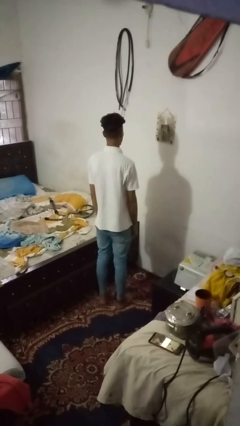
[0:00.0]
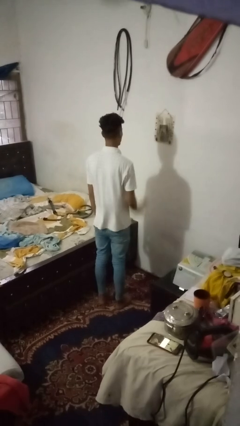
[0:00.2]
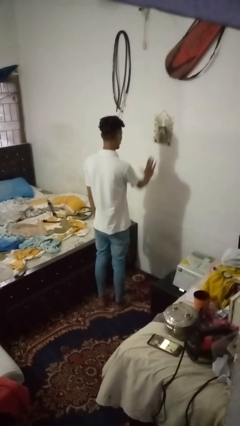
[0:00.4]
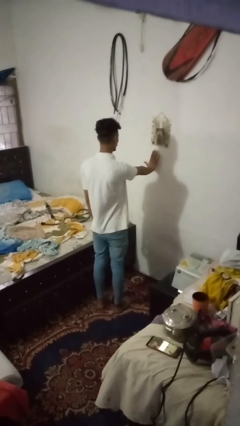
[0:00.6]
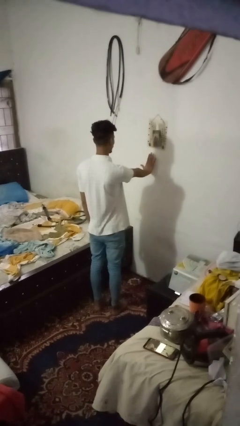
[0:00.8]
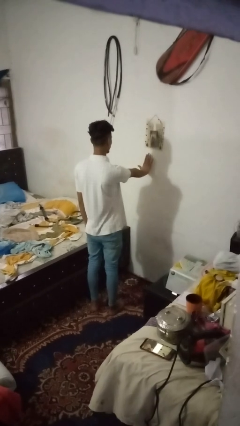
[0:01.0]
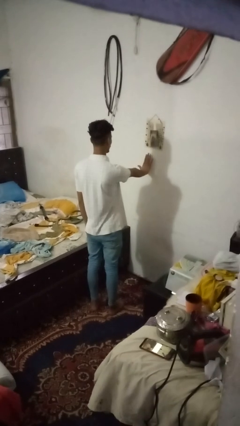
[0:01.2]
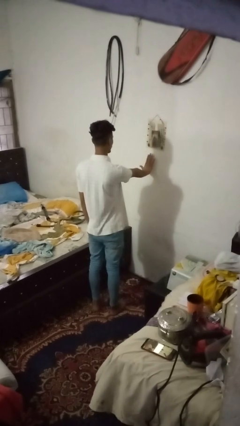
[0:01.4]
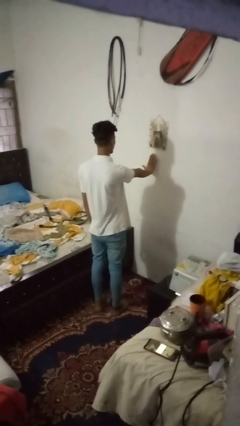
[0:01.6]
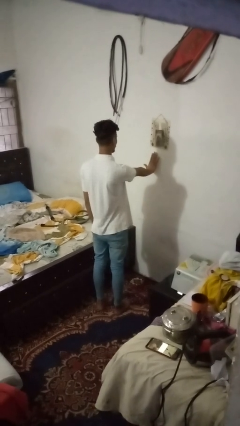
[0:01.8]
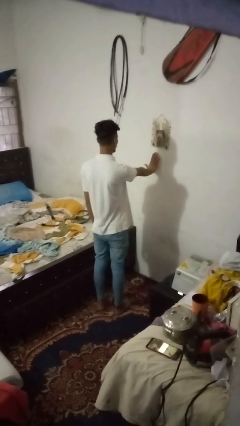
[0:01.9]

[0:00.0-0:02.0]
person gestures stop

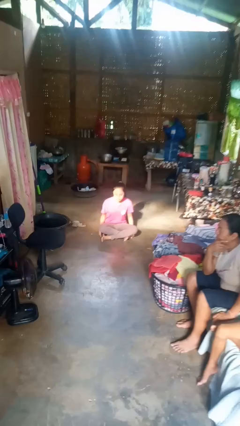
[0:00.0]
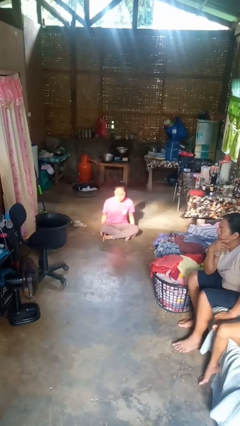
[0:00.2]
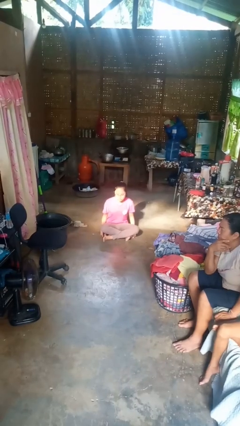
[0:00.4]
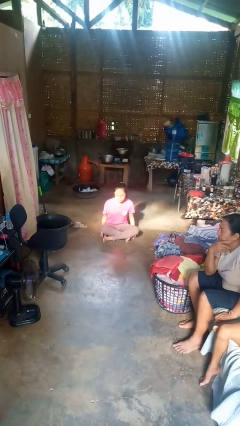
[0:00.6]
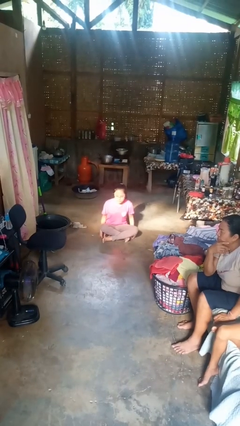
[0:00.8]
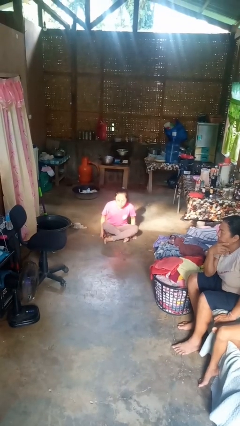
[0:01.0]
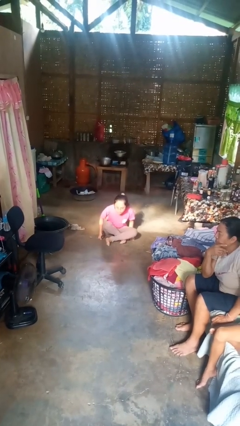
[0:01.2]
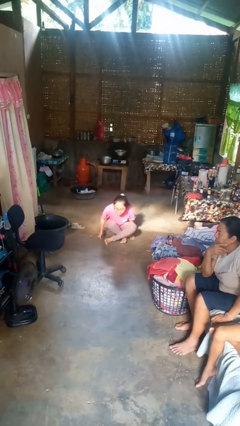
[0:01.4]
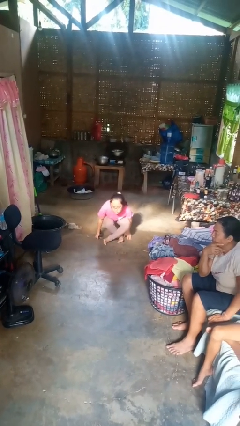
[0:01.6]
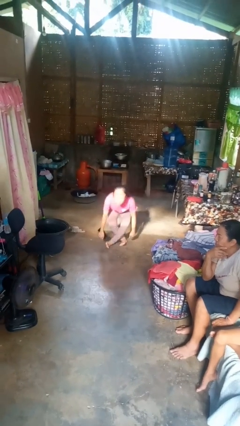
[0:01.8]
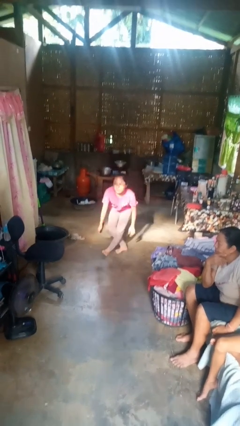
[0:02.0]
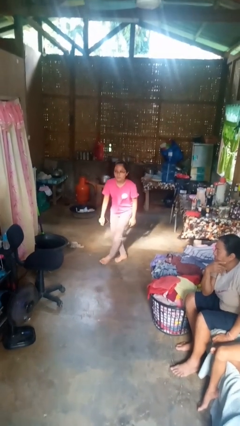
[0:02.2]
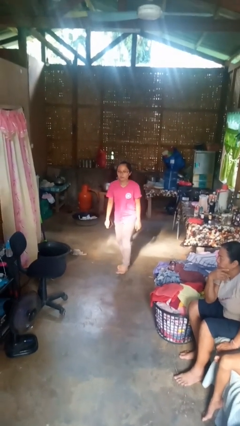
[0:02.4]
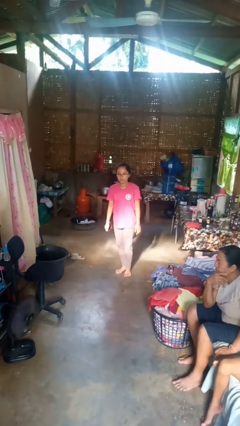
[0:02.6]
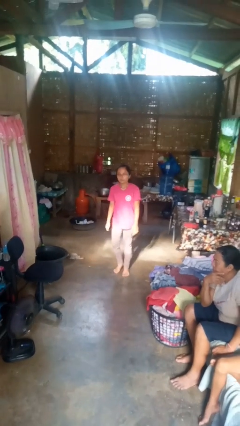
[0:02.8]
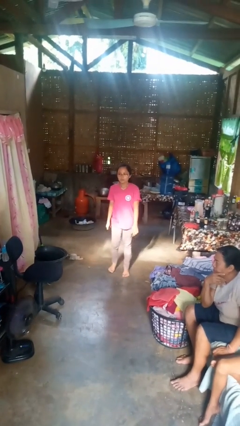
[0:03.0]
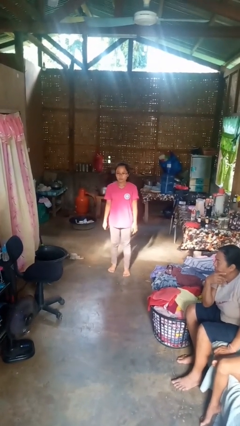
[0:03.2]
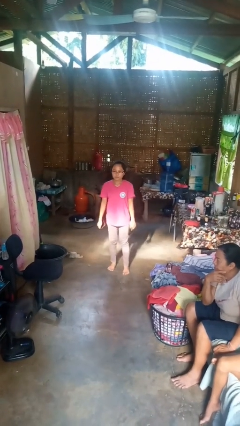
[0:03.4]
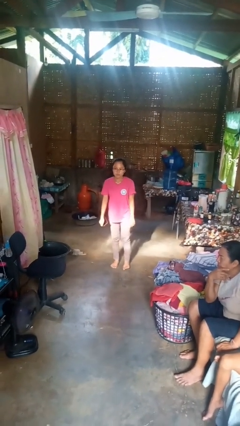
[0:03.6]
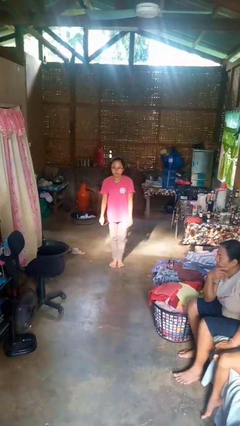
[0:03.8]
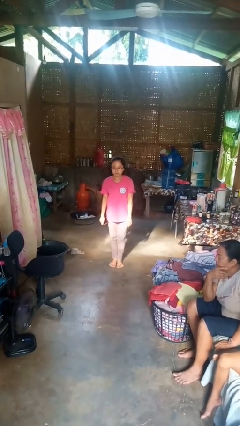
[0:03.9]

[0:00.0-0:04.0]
person stands up from floor

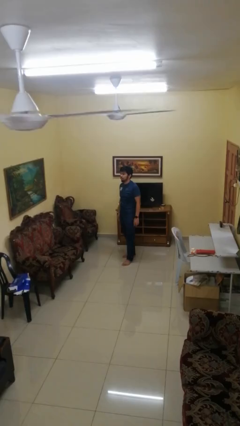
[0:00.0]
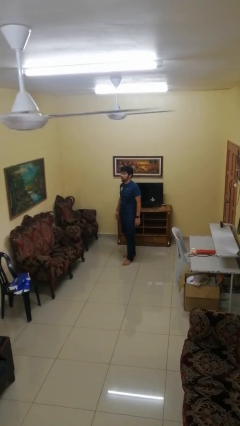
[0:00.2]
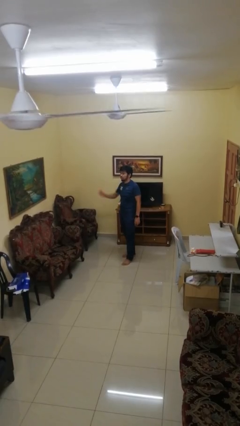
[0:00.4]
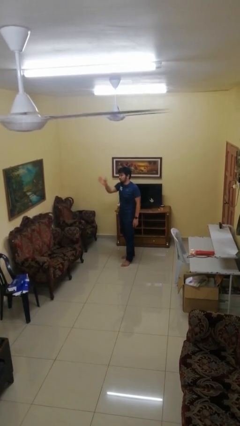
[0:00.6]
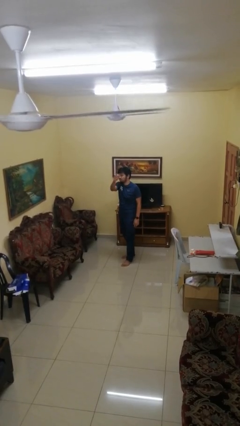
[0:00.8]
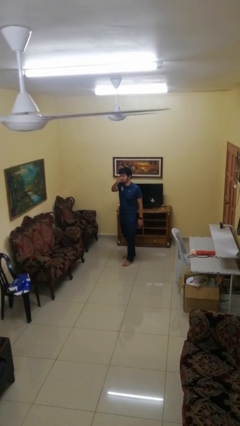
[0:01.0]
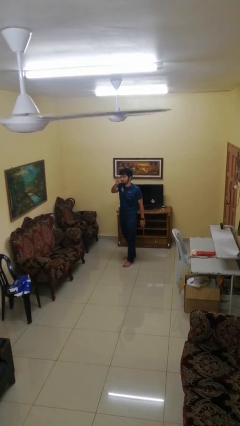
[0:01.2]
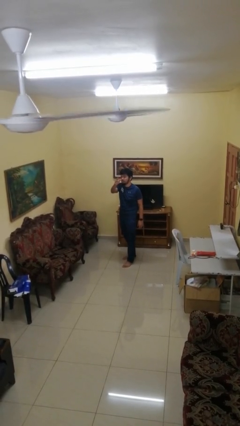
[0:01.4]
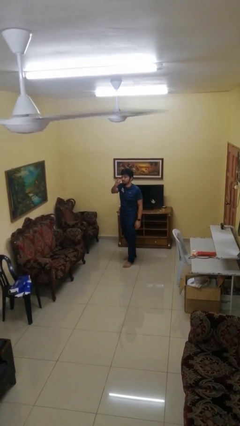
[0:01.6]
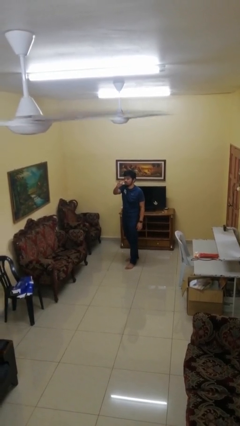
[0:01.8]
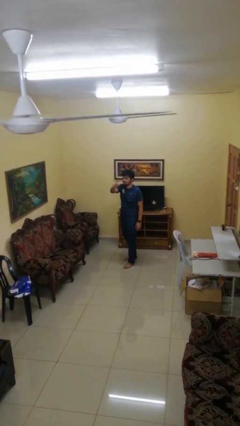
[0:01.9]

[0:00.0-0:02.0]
person gestures swipe left

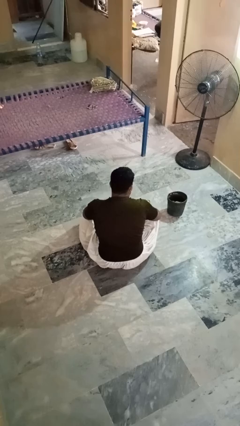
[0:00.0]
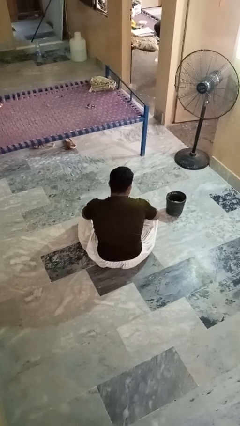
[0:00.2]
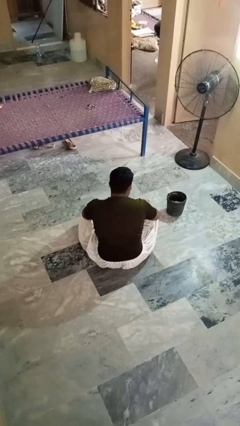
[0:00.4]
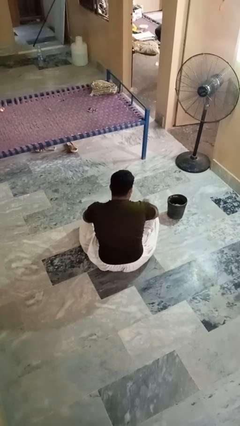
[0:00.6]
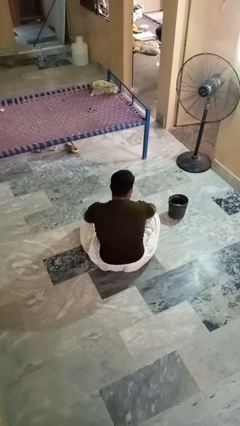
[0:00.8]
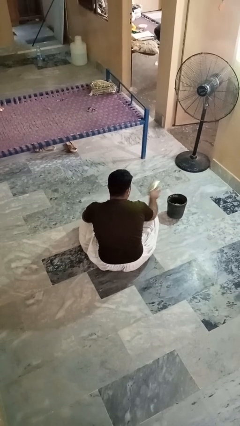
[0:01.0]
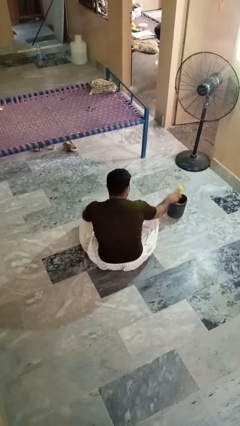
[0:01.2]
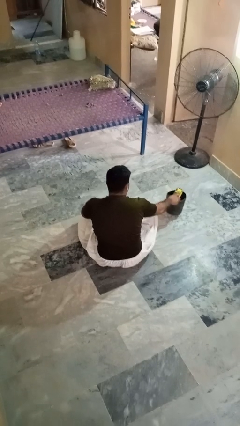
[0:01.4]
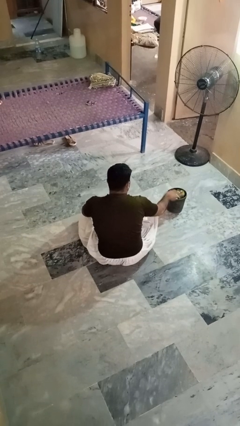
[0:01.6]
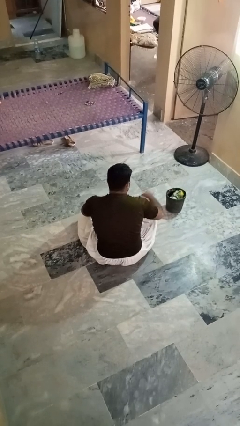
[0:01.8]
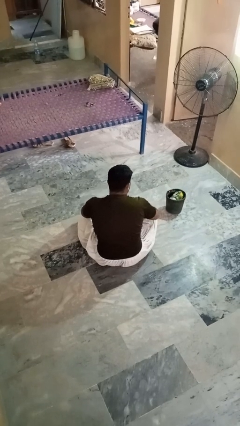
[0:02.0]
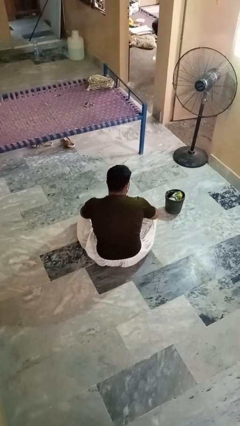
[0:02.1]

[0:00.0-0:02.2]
person puts object into basket

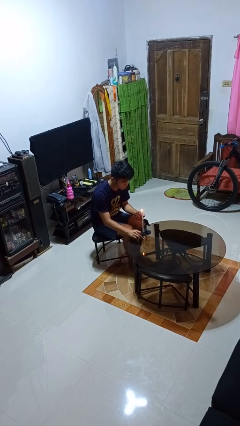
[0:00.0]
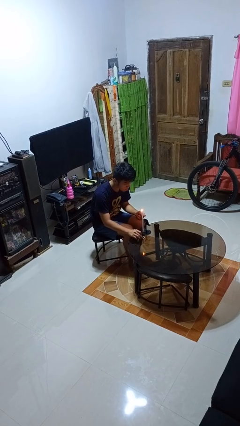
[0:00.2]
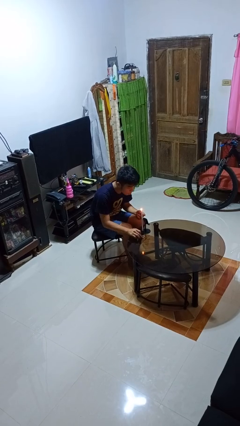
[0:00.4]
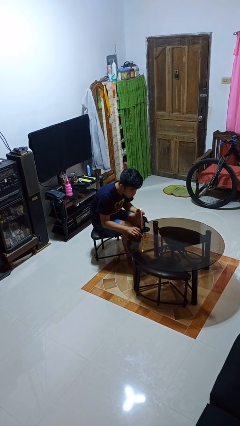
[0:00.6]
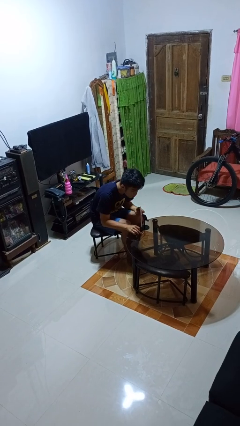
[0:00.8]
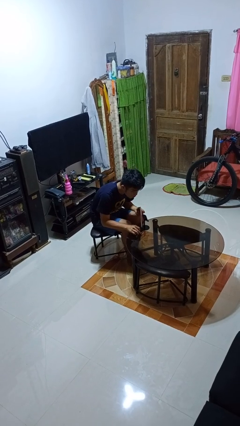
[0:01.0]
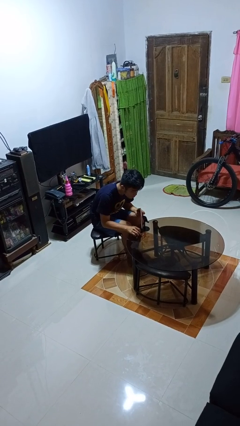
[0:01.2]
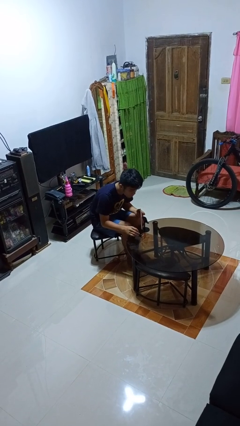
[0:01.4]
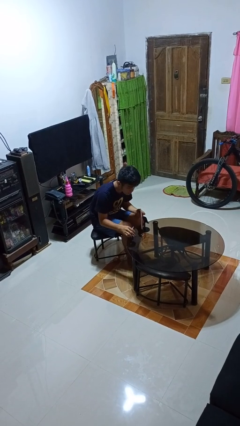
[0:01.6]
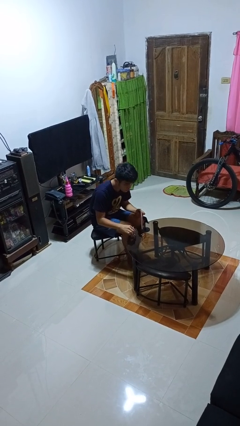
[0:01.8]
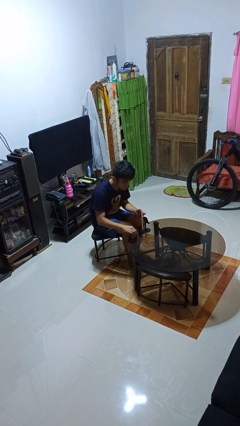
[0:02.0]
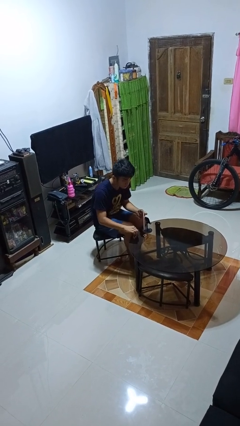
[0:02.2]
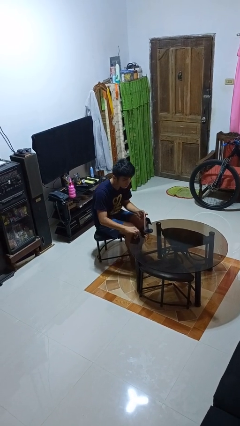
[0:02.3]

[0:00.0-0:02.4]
person extinguishes candle

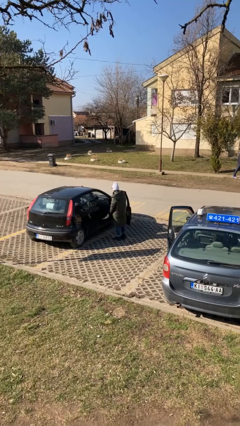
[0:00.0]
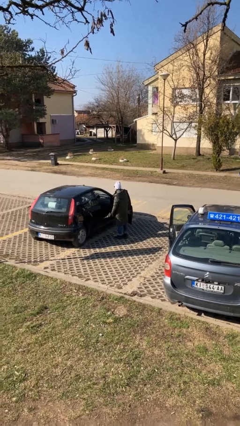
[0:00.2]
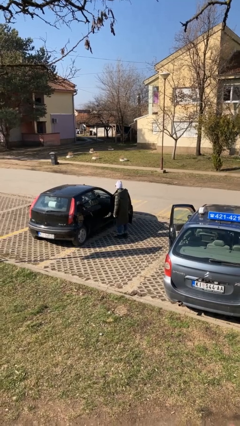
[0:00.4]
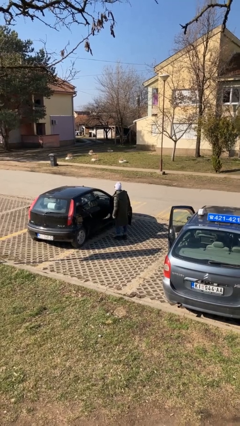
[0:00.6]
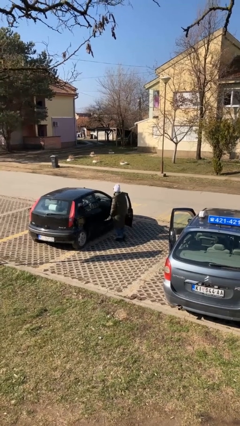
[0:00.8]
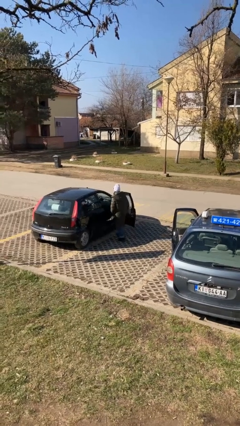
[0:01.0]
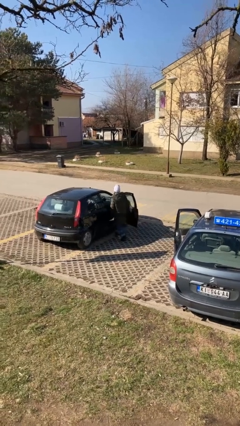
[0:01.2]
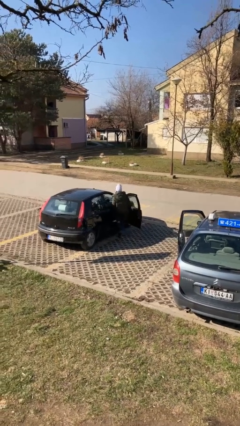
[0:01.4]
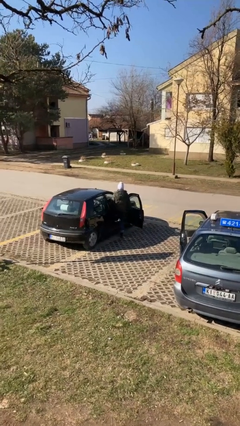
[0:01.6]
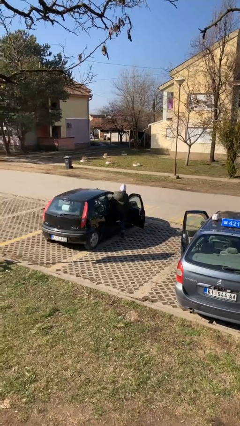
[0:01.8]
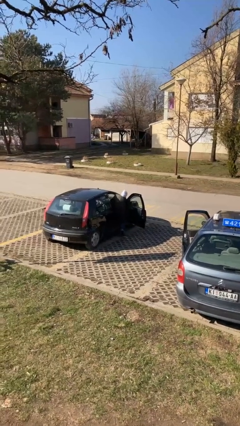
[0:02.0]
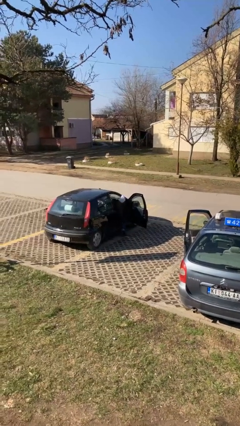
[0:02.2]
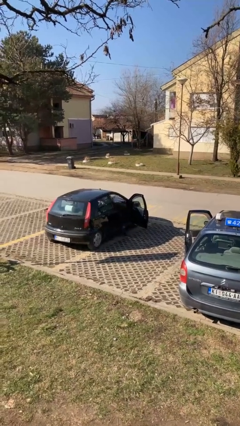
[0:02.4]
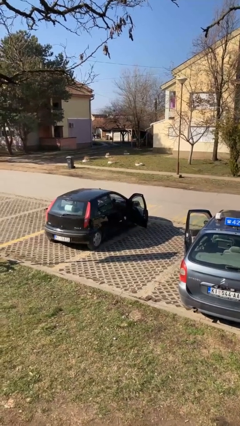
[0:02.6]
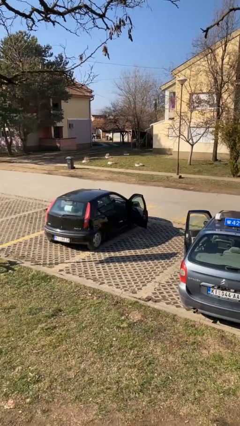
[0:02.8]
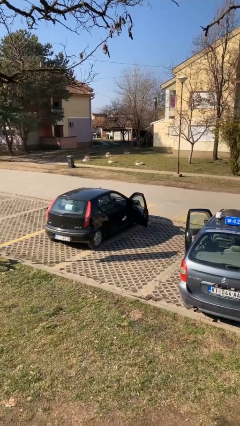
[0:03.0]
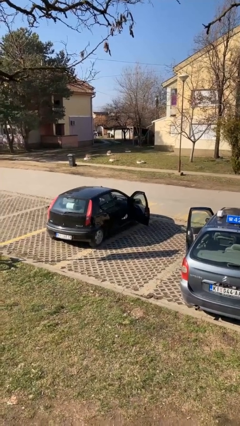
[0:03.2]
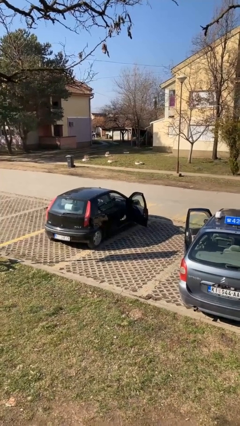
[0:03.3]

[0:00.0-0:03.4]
person enters car

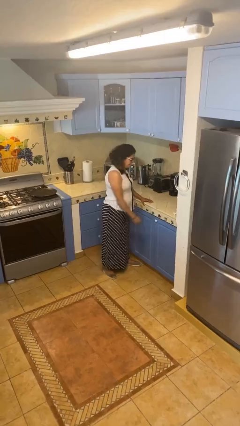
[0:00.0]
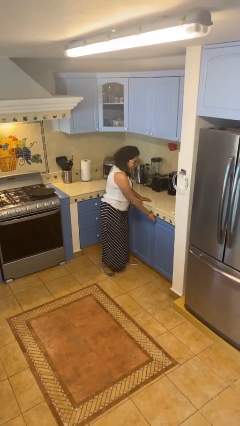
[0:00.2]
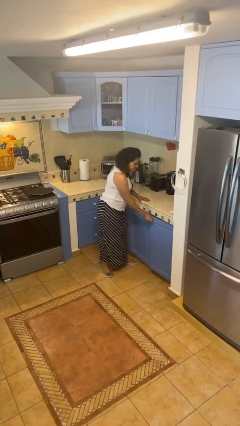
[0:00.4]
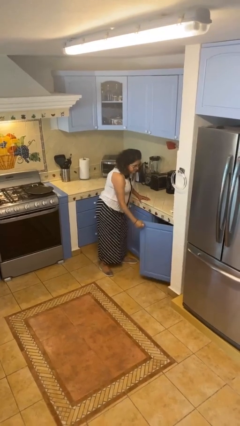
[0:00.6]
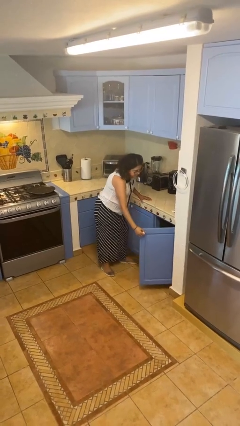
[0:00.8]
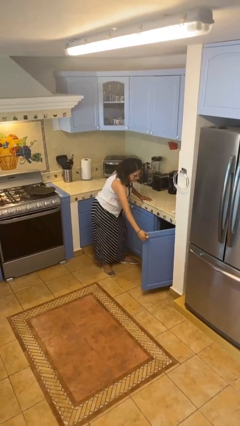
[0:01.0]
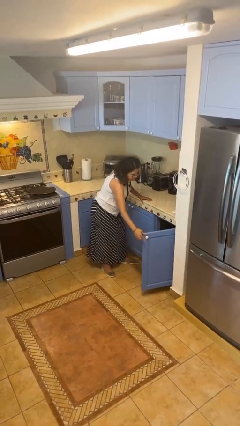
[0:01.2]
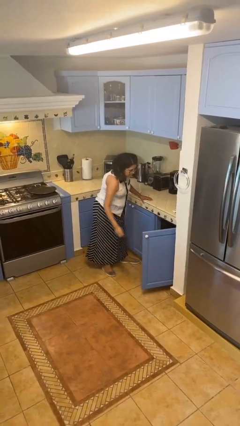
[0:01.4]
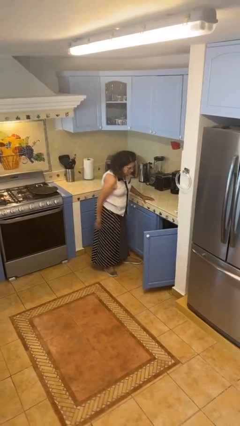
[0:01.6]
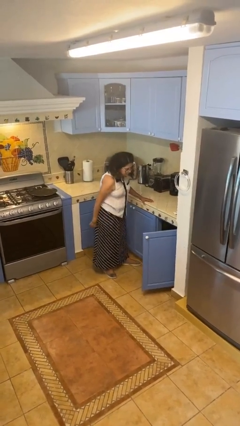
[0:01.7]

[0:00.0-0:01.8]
person opens cabinet
